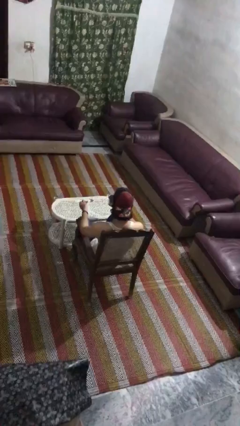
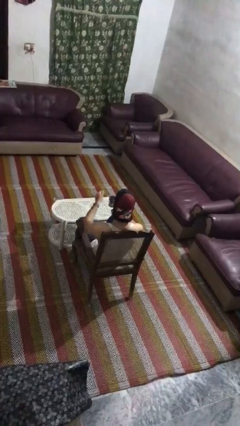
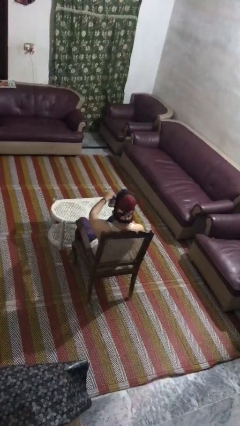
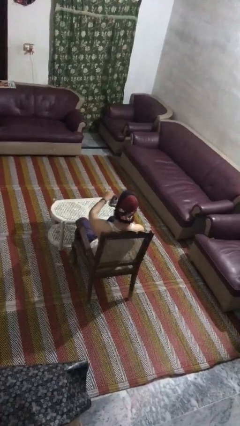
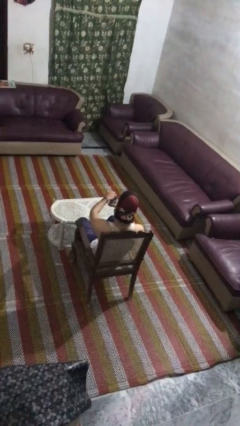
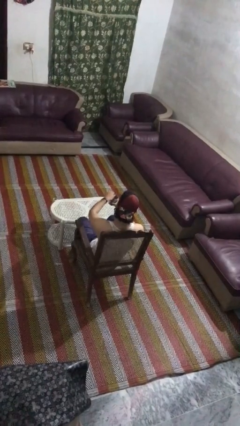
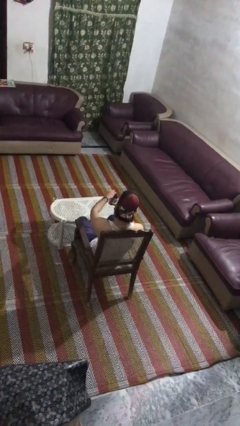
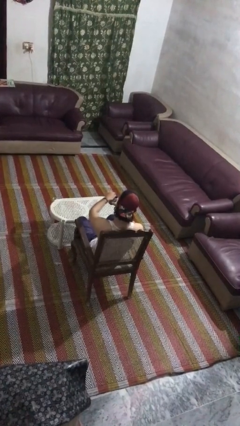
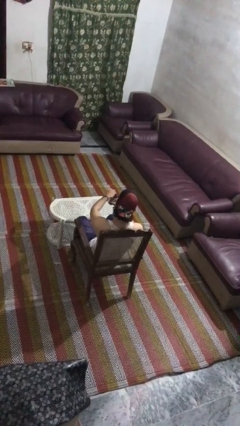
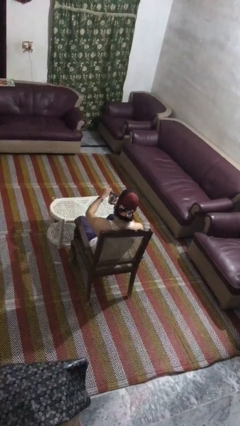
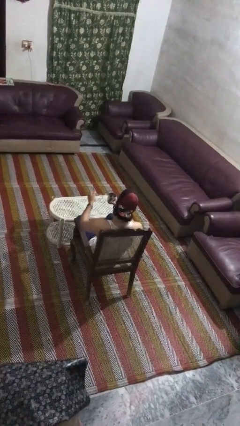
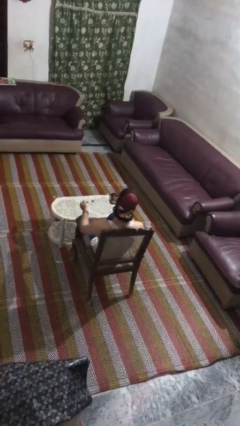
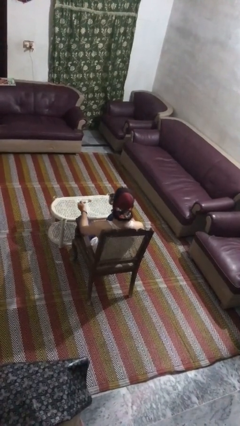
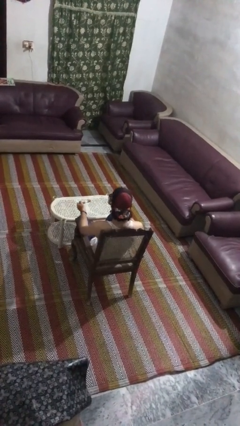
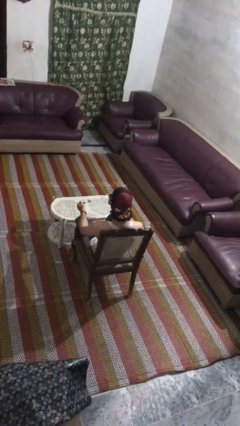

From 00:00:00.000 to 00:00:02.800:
person stirs mug

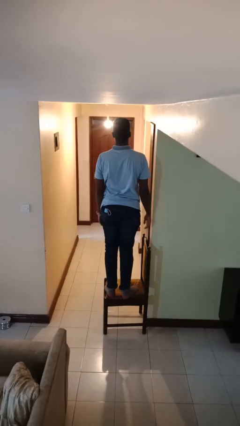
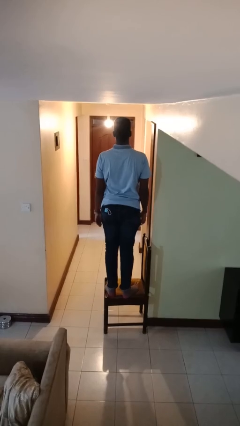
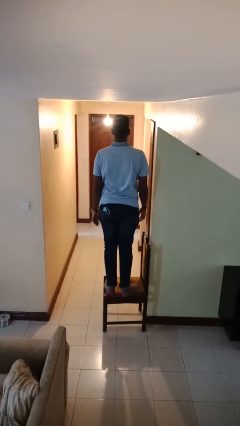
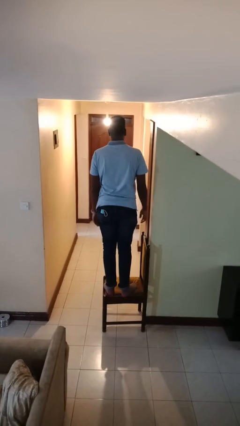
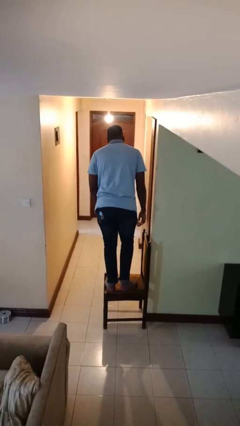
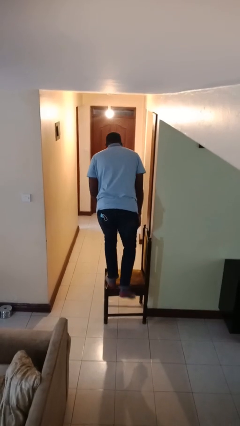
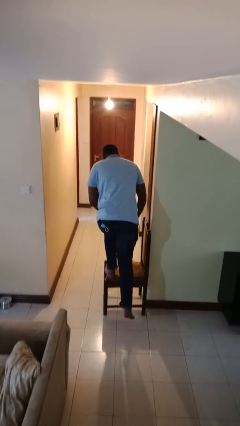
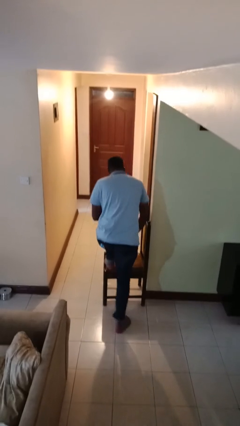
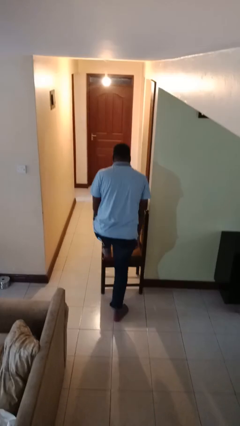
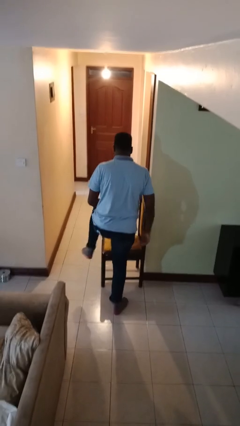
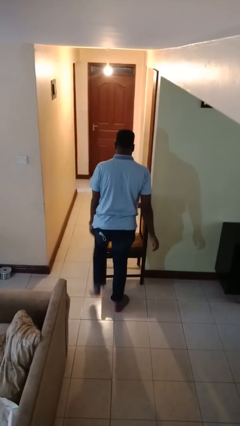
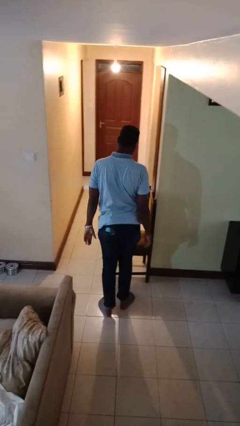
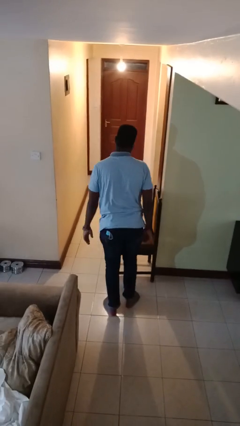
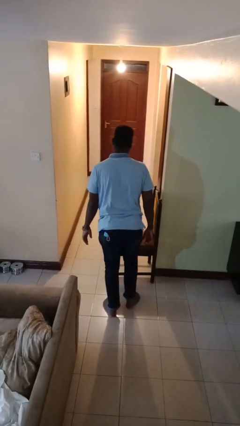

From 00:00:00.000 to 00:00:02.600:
person climbs off chair

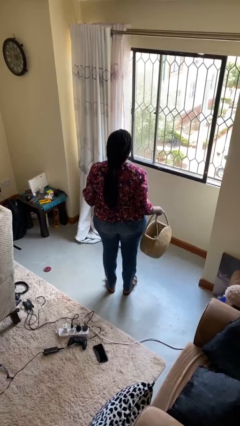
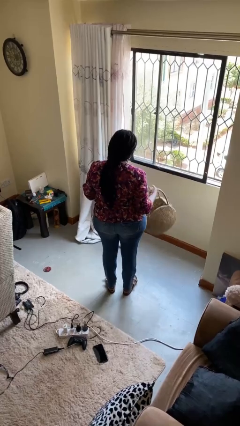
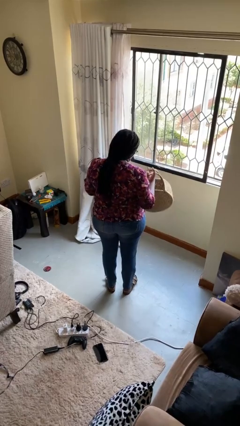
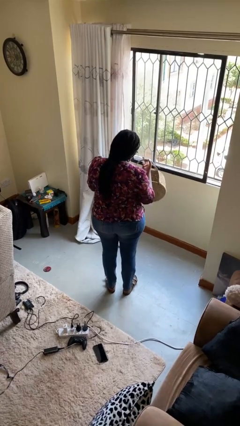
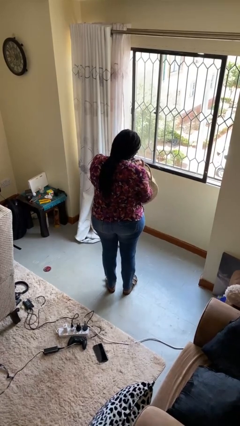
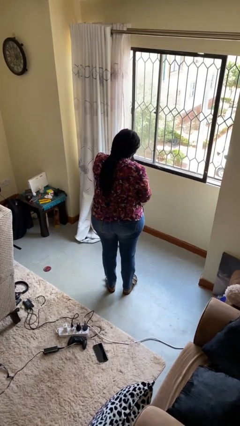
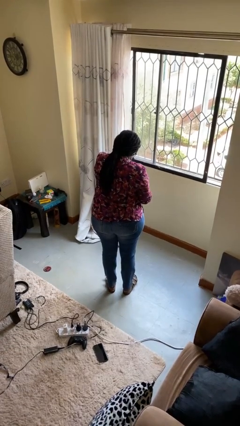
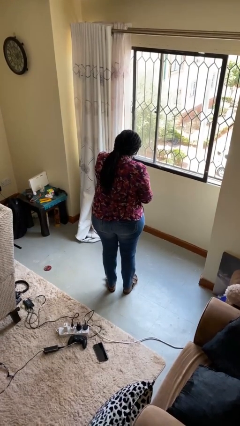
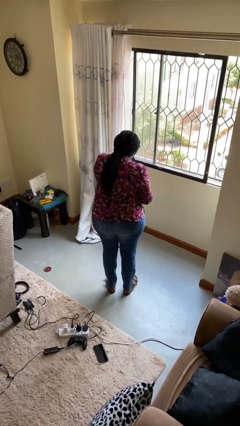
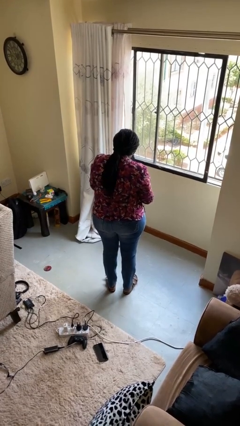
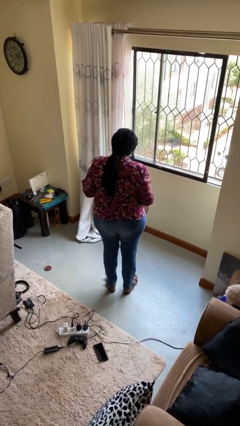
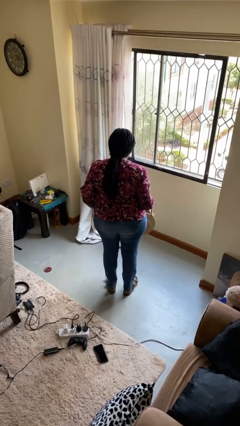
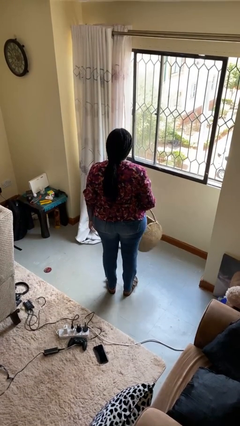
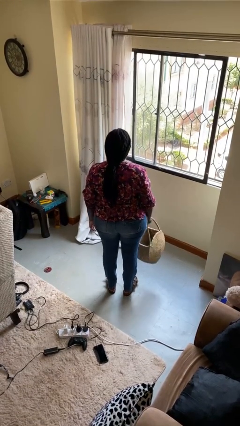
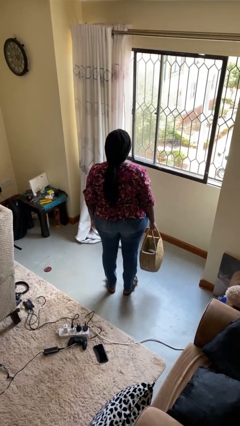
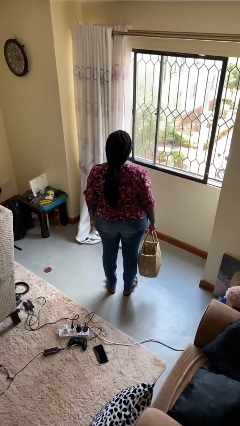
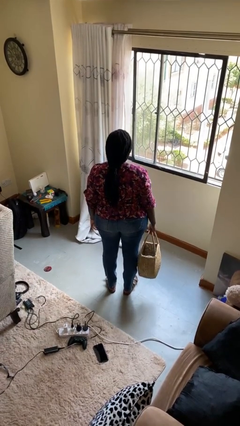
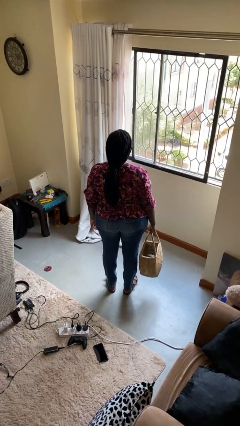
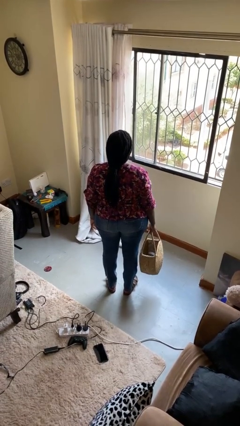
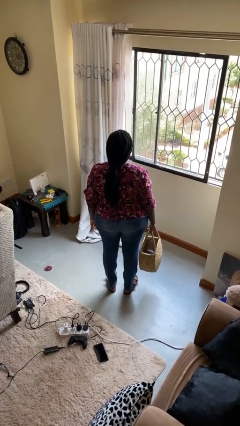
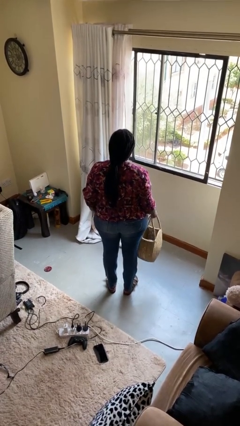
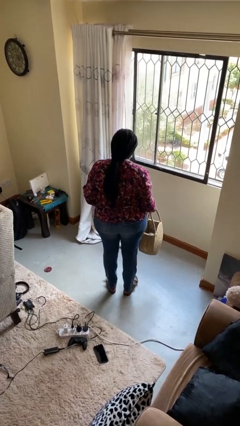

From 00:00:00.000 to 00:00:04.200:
person puts object into basket

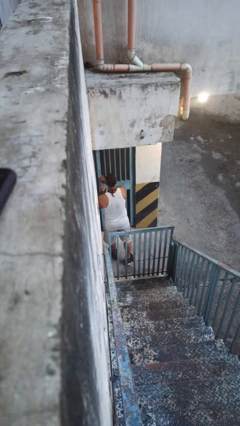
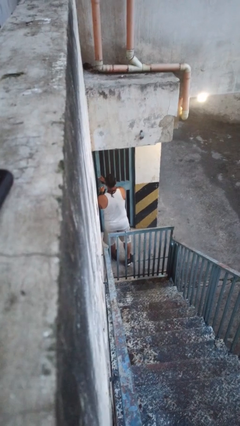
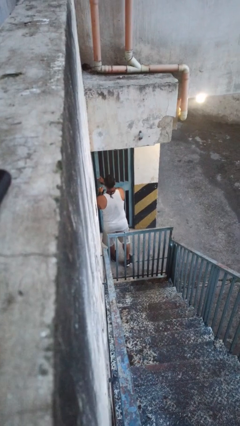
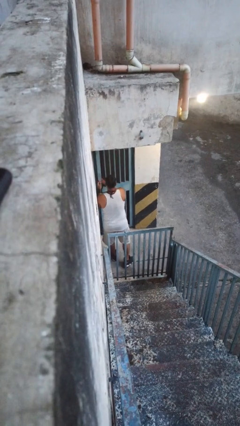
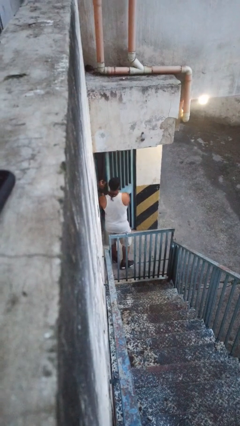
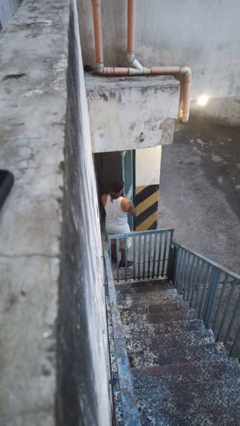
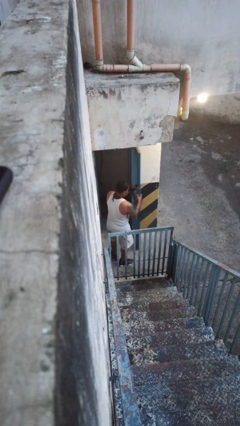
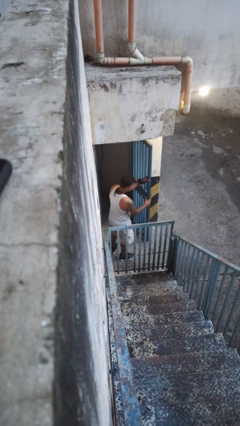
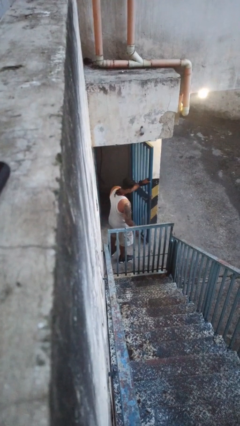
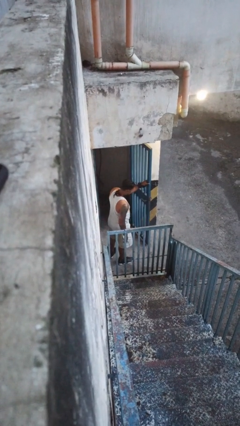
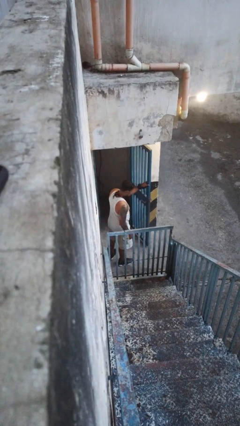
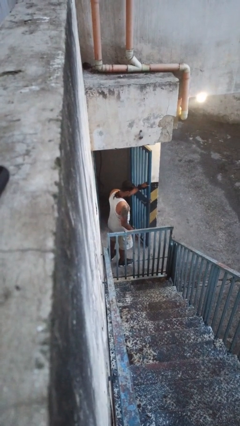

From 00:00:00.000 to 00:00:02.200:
person opens facility door

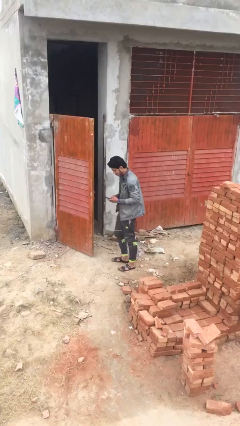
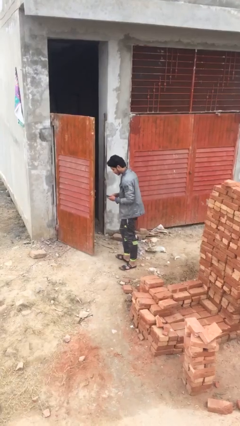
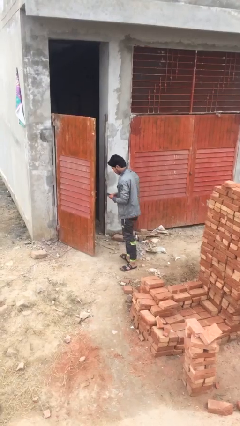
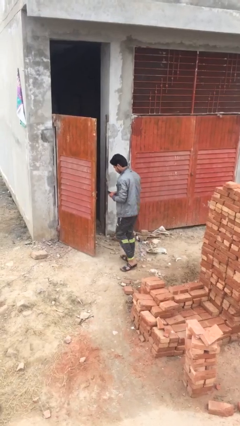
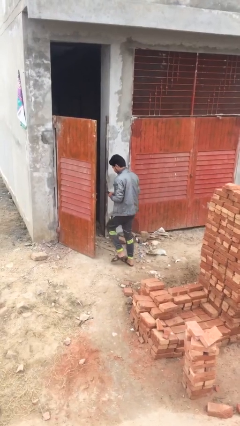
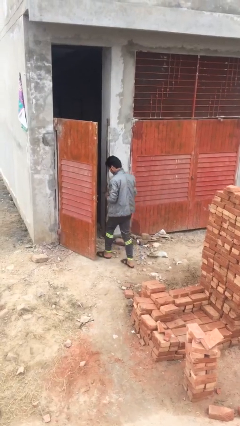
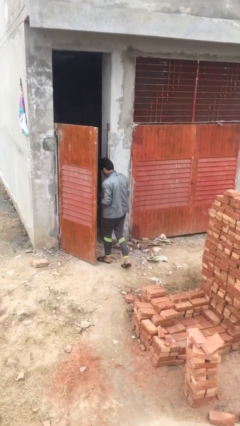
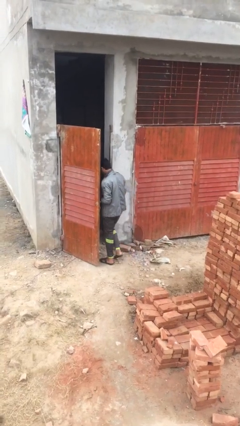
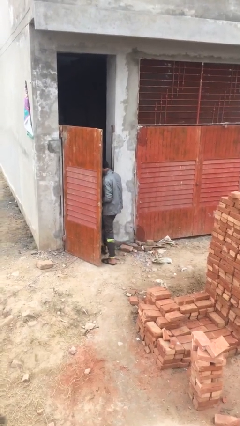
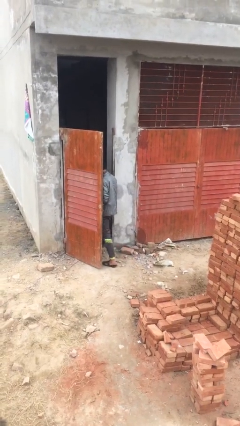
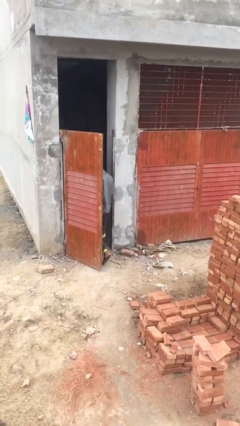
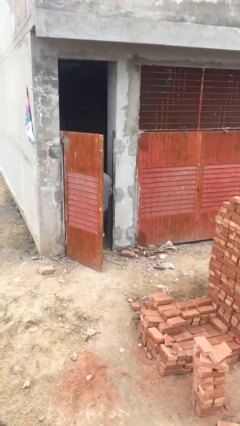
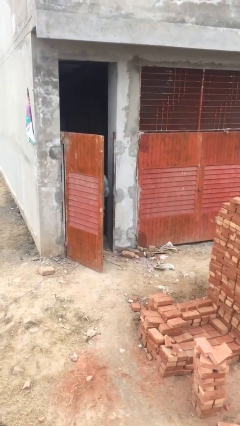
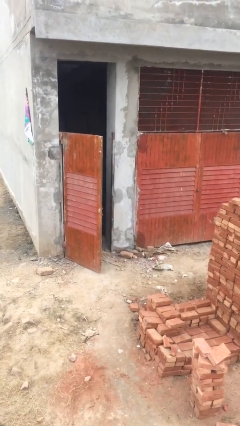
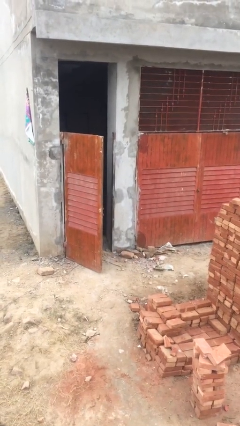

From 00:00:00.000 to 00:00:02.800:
person exits scene through structure

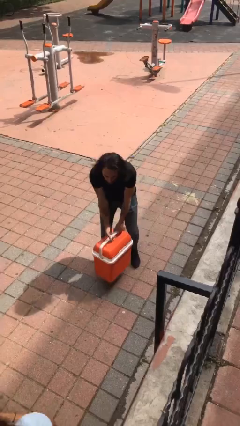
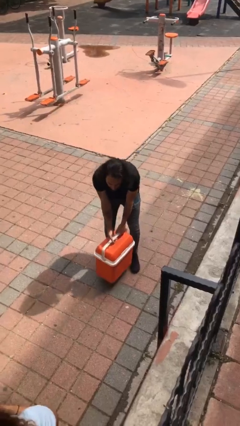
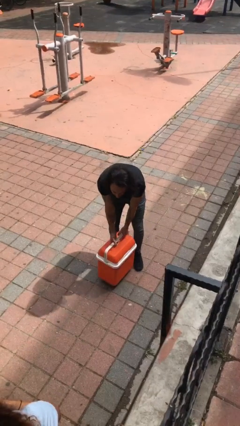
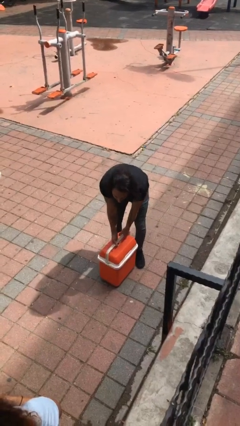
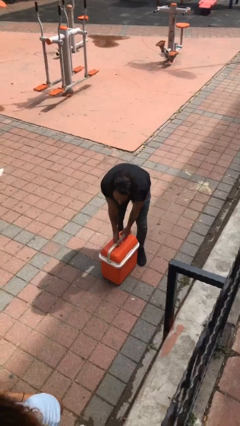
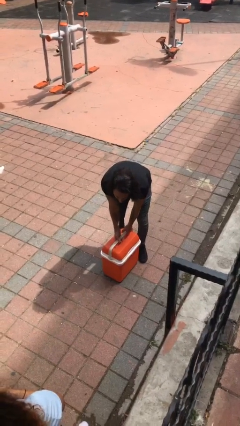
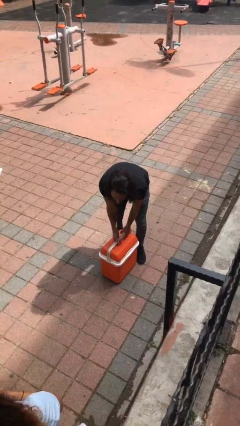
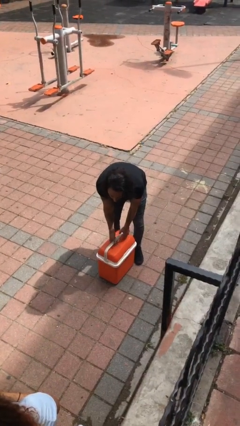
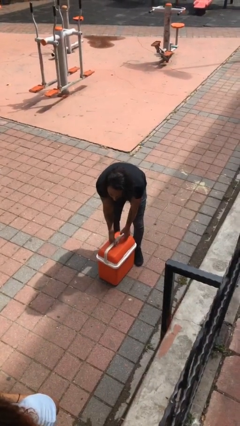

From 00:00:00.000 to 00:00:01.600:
person puts down object on floor

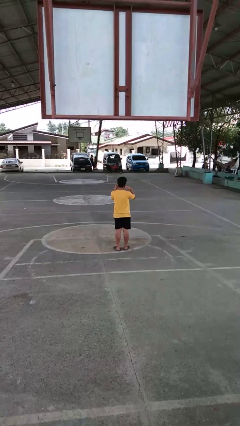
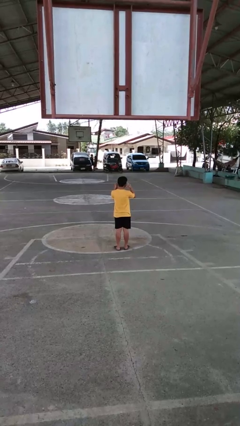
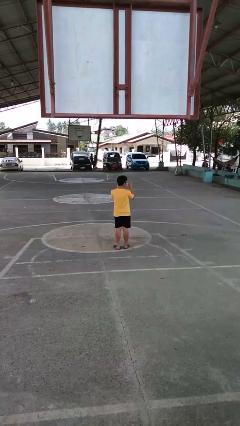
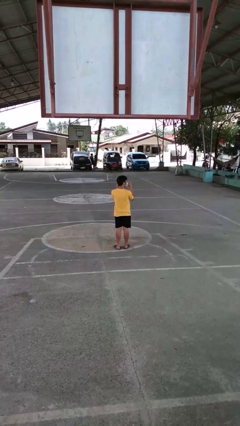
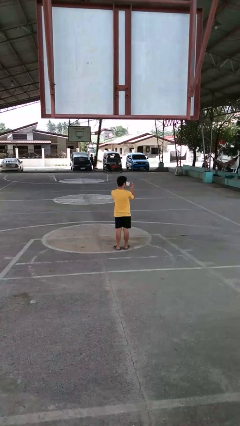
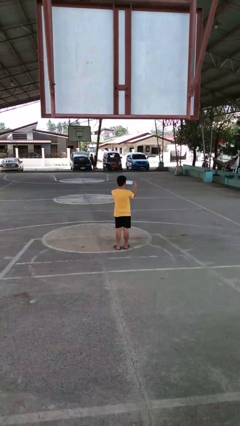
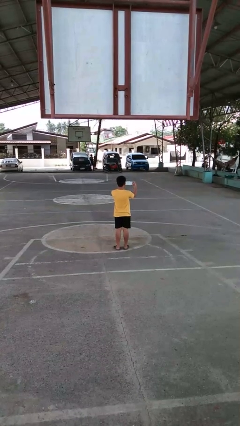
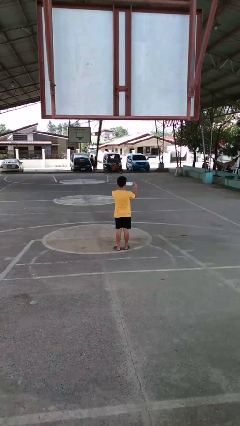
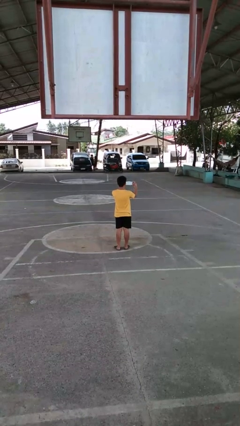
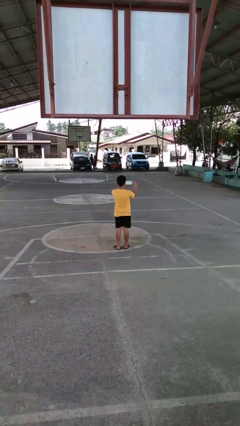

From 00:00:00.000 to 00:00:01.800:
person takes off facemask
